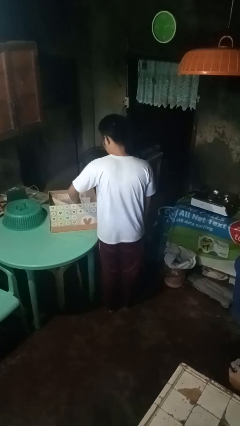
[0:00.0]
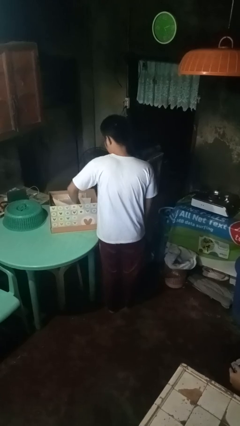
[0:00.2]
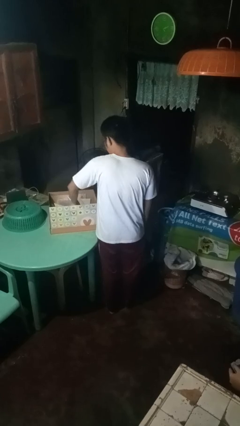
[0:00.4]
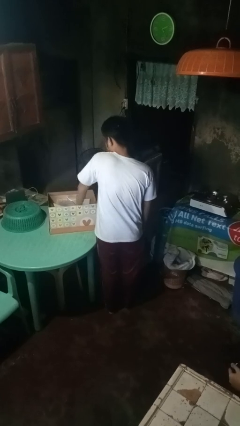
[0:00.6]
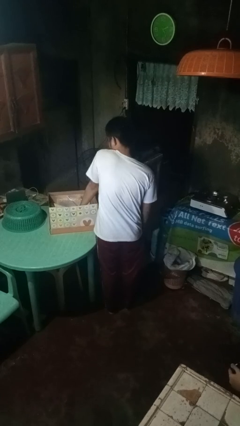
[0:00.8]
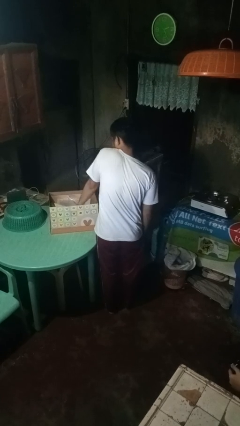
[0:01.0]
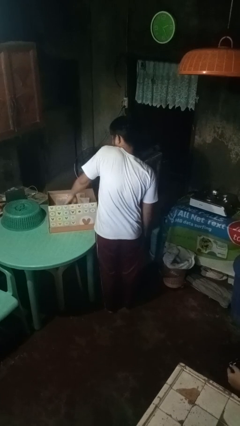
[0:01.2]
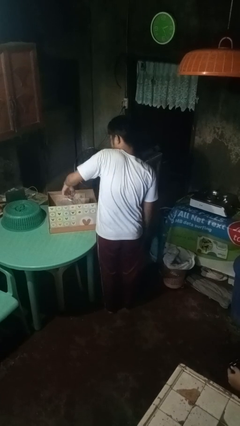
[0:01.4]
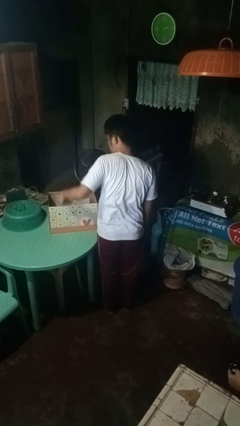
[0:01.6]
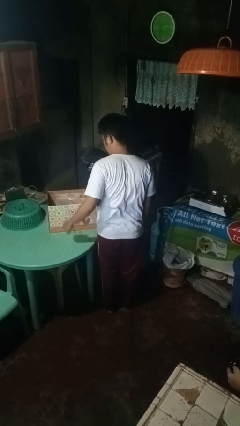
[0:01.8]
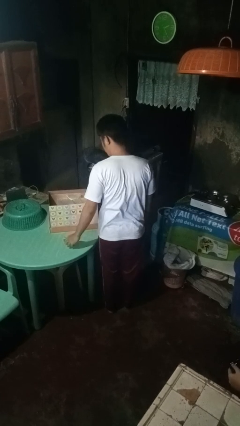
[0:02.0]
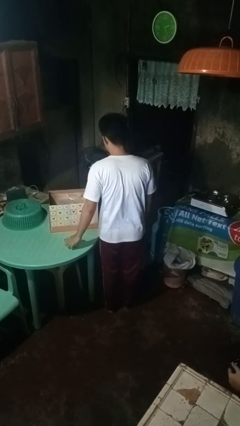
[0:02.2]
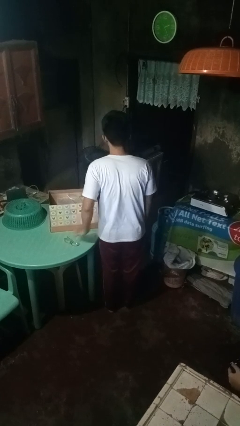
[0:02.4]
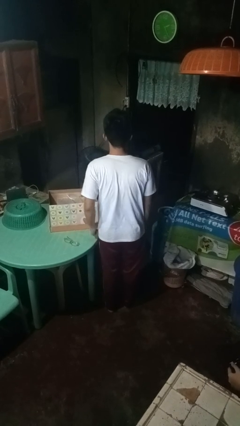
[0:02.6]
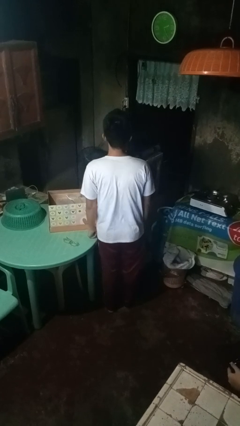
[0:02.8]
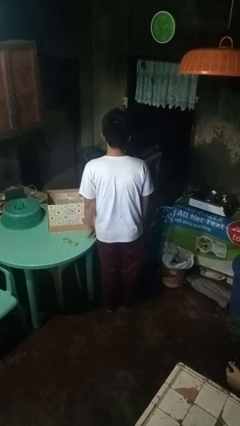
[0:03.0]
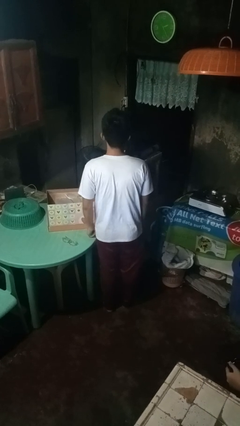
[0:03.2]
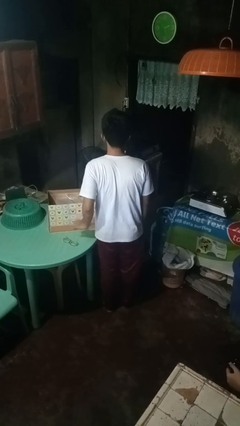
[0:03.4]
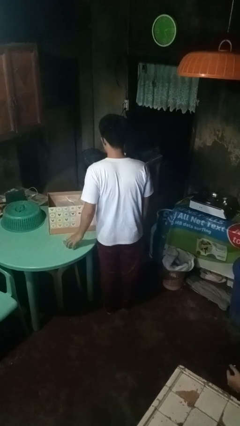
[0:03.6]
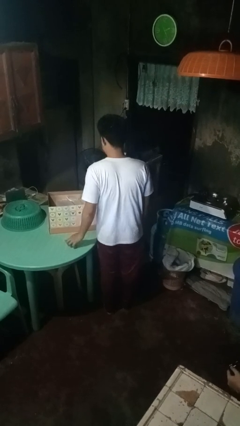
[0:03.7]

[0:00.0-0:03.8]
person takes object from box

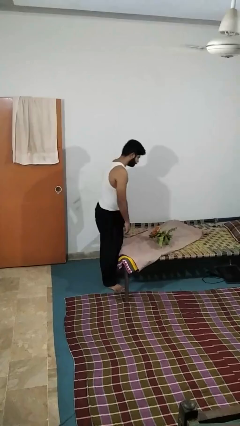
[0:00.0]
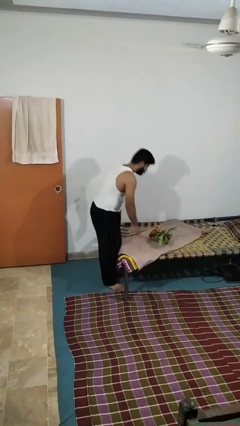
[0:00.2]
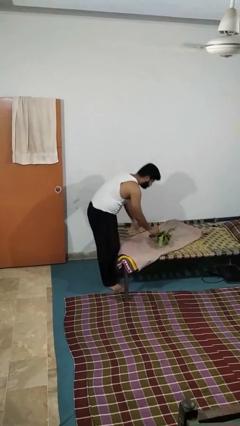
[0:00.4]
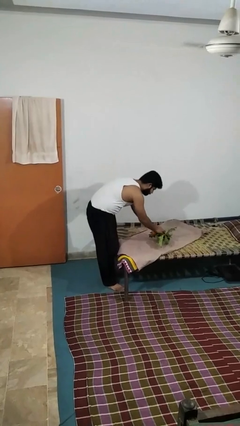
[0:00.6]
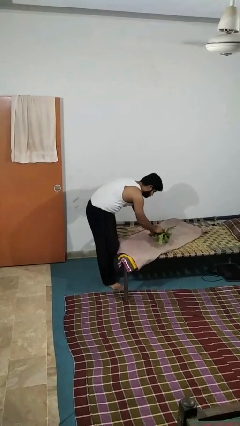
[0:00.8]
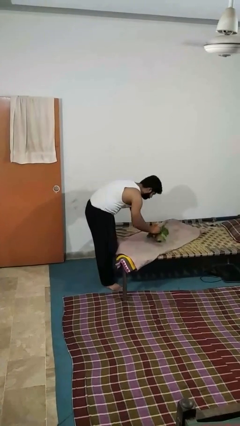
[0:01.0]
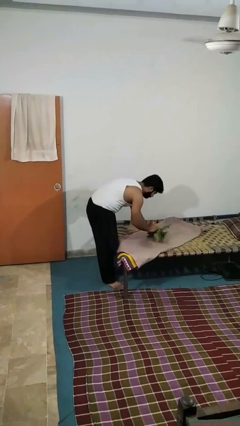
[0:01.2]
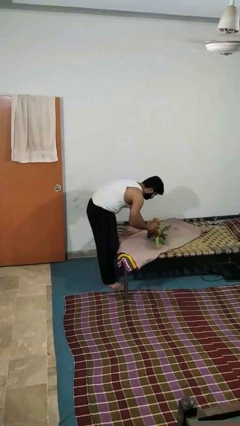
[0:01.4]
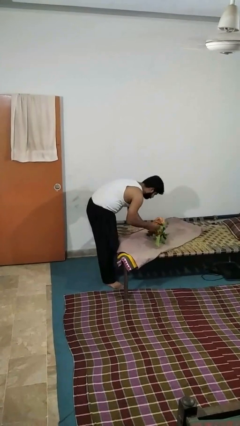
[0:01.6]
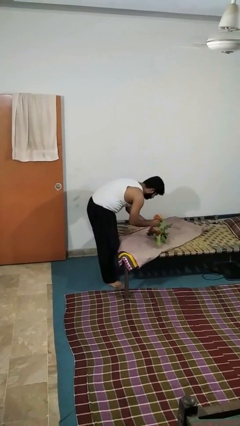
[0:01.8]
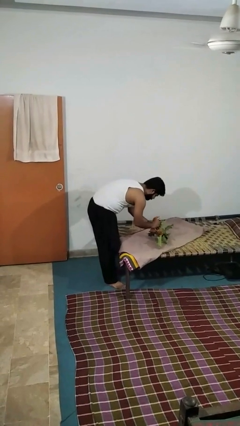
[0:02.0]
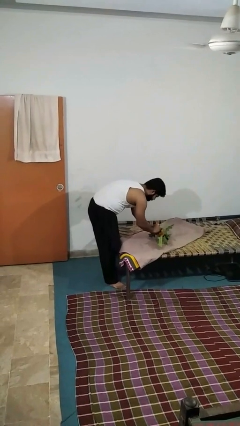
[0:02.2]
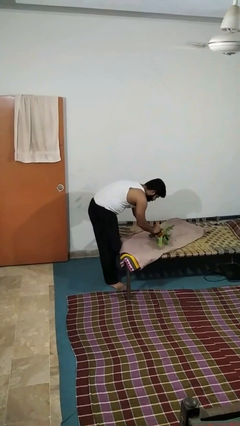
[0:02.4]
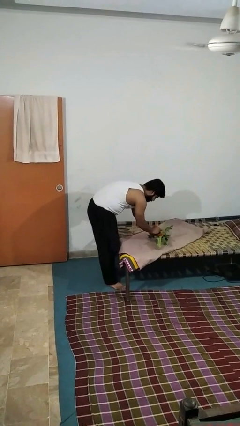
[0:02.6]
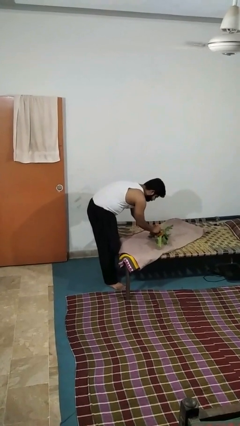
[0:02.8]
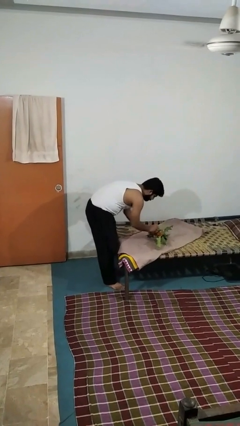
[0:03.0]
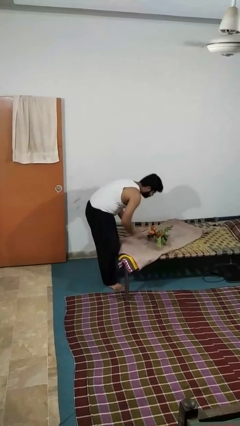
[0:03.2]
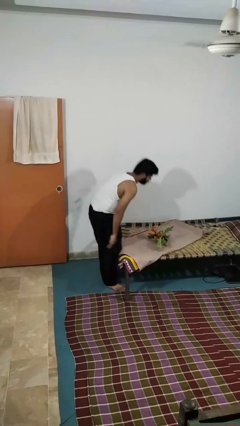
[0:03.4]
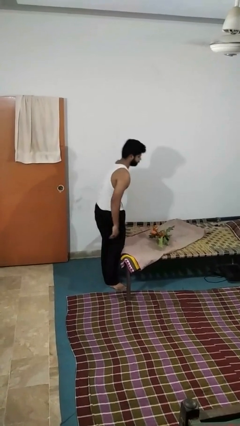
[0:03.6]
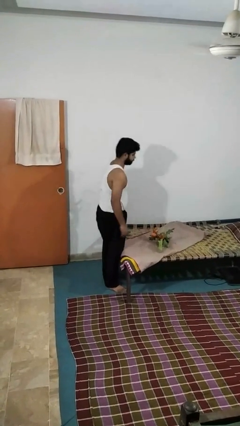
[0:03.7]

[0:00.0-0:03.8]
person arranges flowers in vase

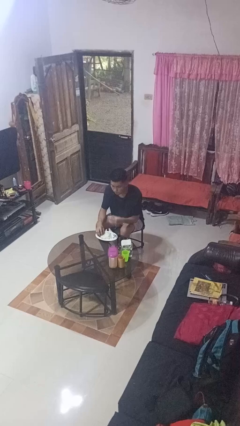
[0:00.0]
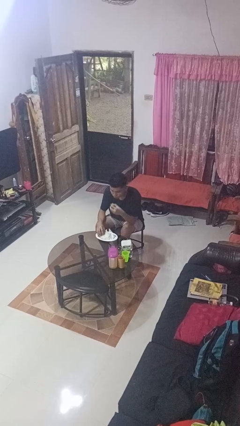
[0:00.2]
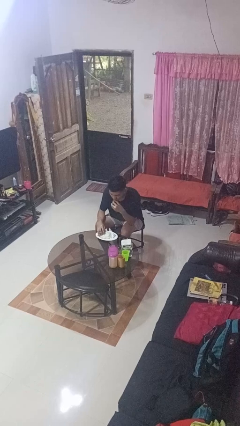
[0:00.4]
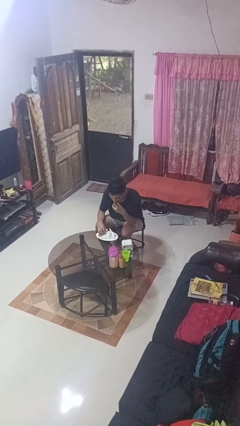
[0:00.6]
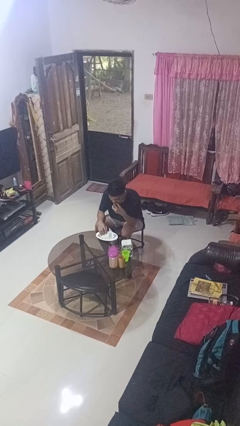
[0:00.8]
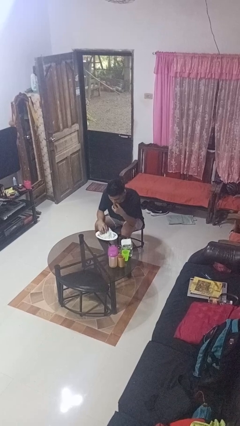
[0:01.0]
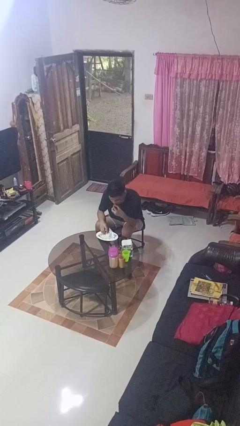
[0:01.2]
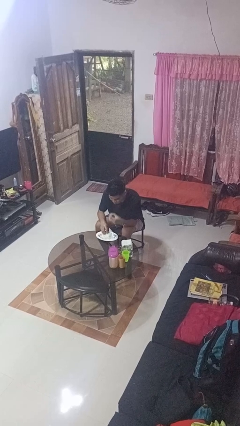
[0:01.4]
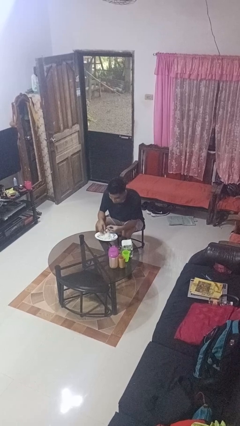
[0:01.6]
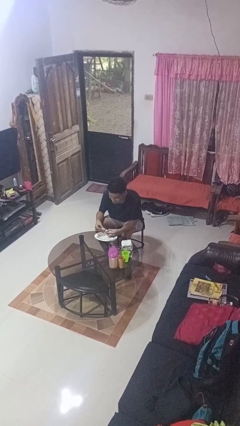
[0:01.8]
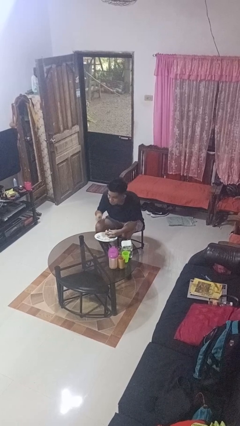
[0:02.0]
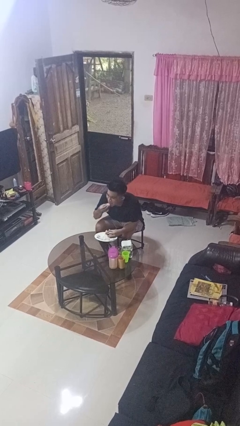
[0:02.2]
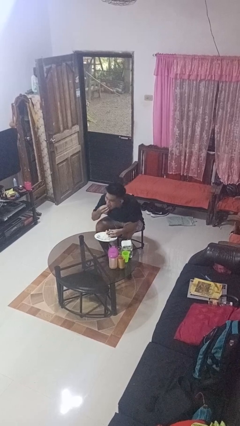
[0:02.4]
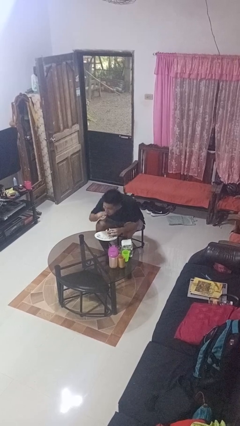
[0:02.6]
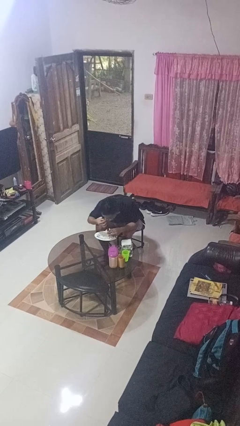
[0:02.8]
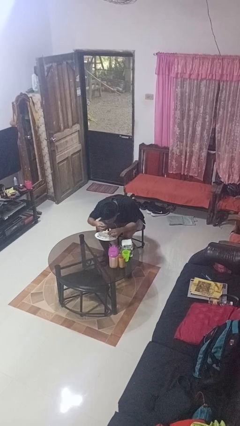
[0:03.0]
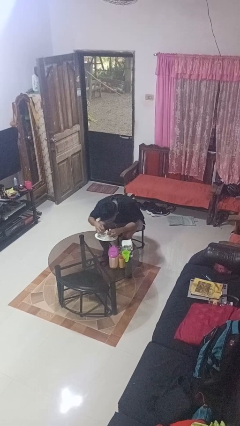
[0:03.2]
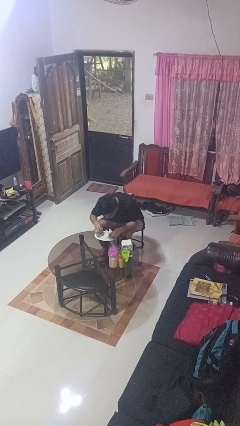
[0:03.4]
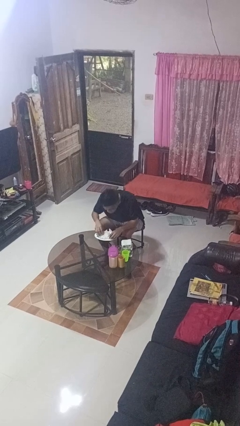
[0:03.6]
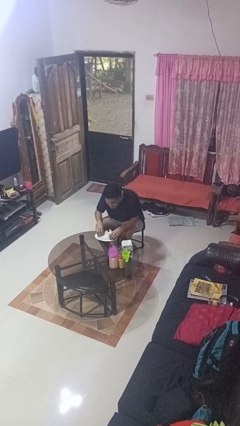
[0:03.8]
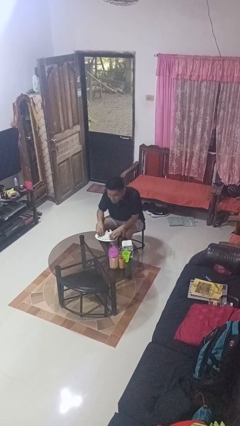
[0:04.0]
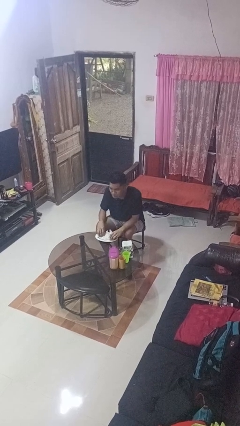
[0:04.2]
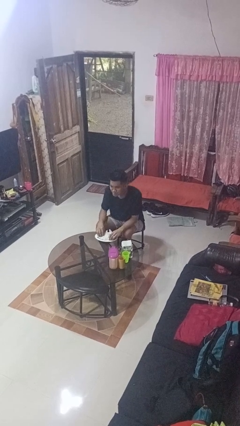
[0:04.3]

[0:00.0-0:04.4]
person eats with hands

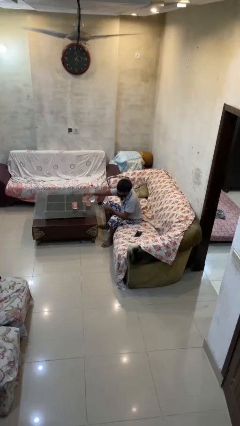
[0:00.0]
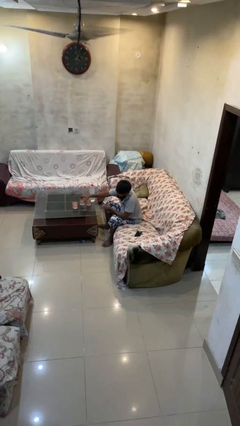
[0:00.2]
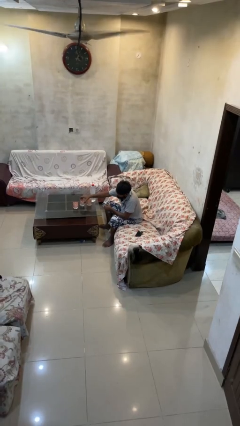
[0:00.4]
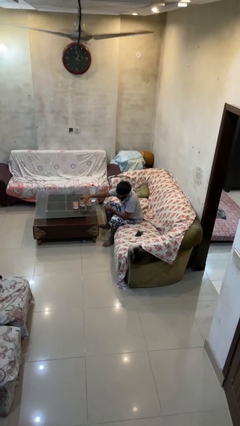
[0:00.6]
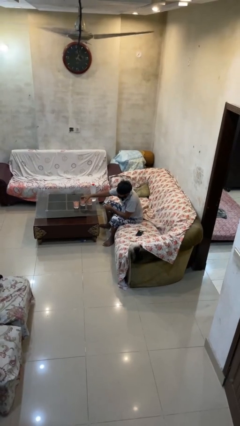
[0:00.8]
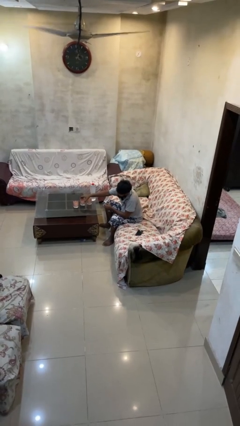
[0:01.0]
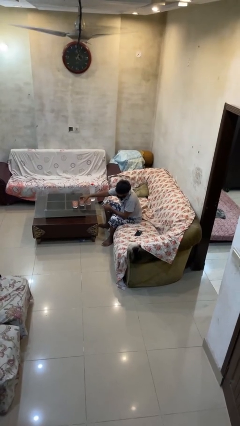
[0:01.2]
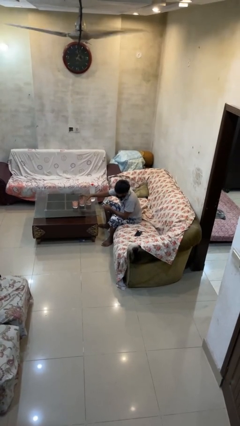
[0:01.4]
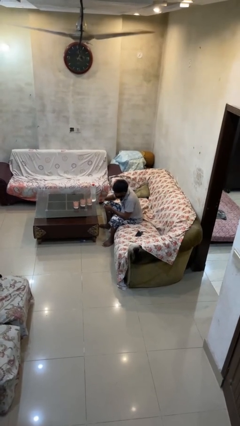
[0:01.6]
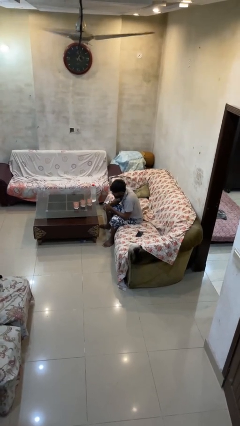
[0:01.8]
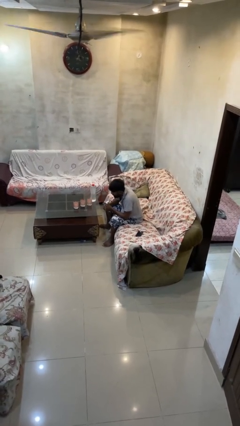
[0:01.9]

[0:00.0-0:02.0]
person puts down object on table

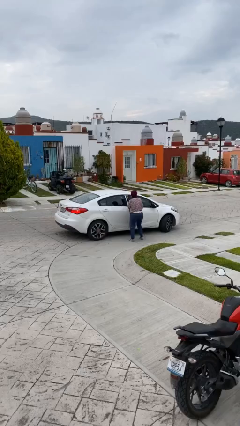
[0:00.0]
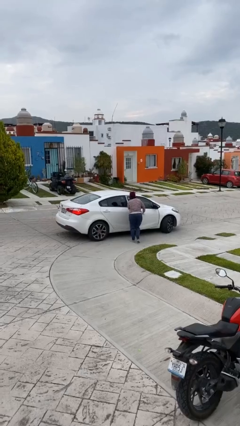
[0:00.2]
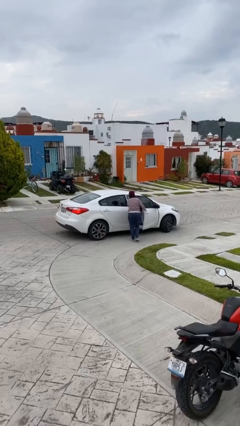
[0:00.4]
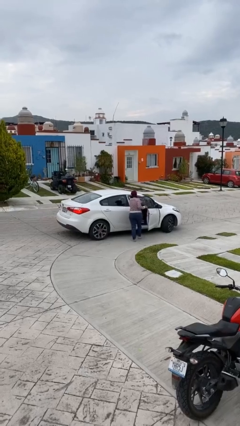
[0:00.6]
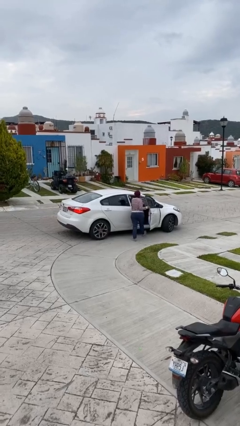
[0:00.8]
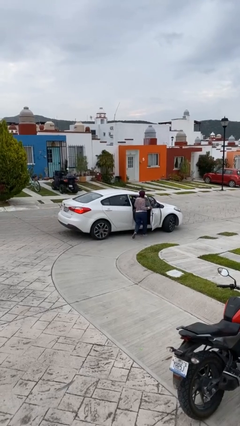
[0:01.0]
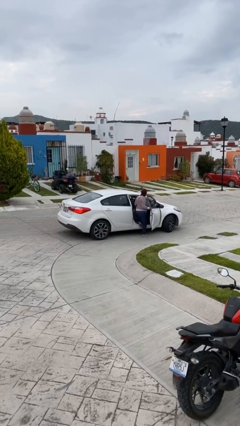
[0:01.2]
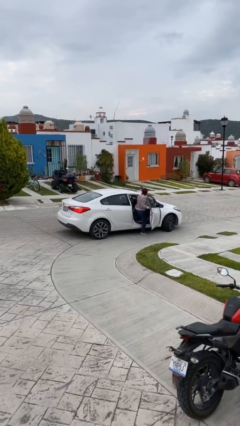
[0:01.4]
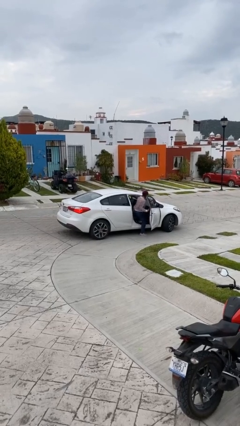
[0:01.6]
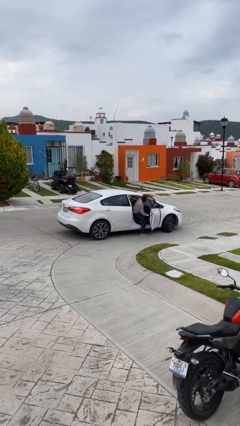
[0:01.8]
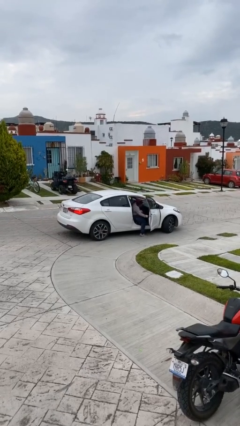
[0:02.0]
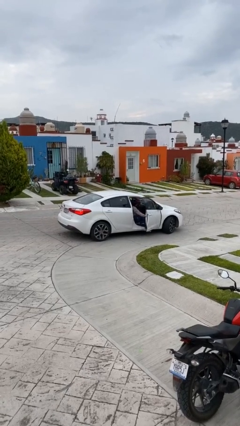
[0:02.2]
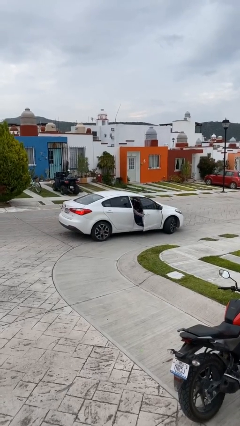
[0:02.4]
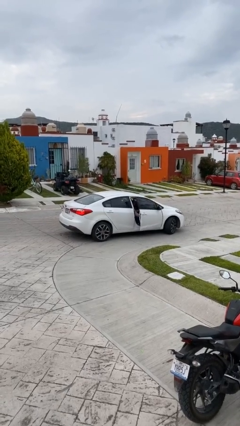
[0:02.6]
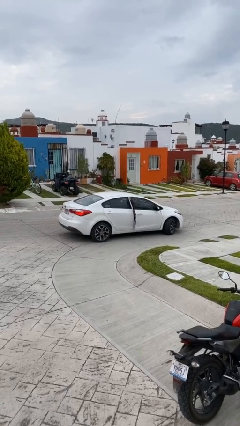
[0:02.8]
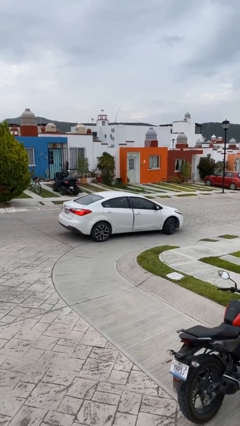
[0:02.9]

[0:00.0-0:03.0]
car picks up person

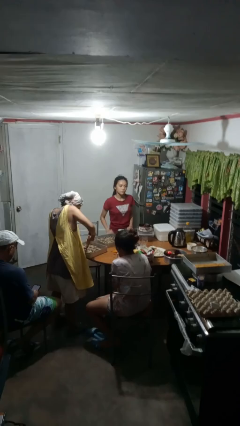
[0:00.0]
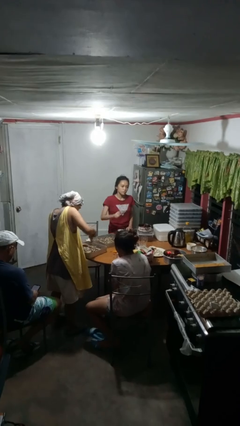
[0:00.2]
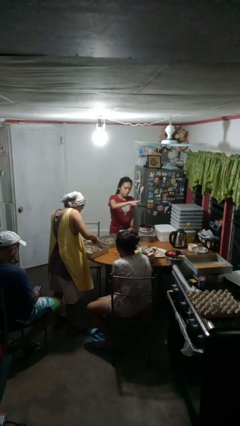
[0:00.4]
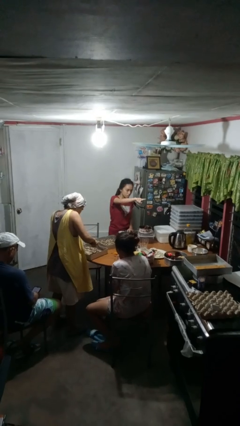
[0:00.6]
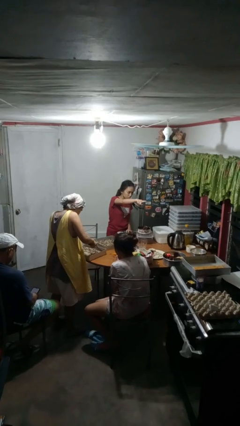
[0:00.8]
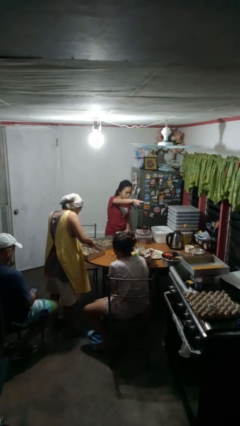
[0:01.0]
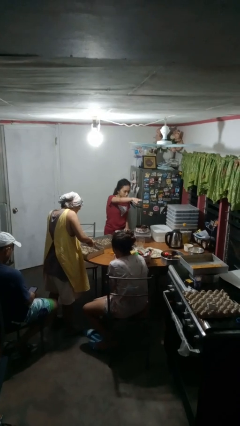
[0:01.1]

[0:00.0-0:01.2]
person points at person
